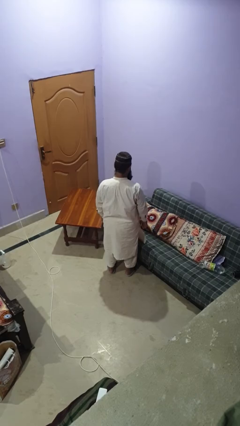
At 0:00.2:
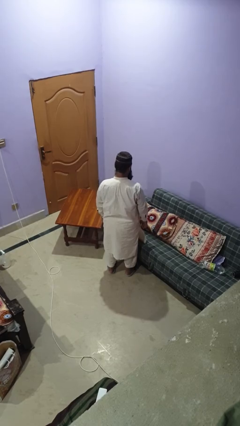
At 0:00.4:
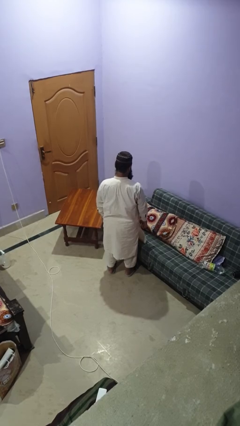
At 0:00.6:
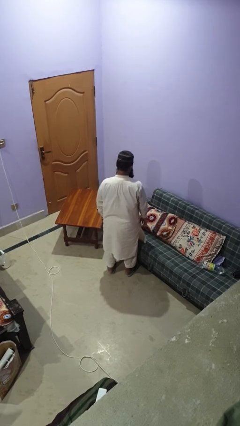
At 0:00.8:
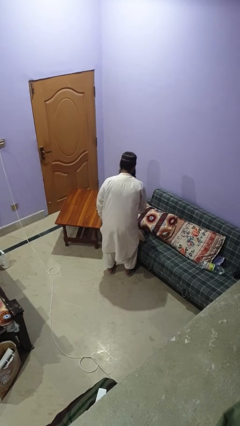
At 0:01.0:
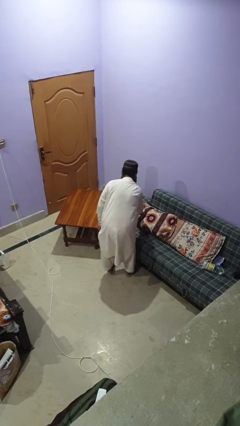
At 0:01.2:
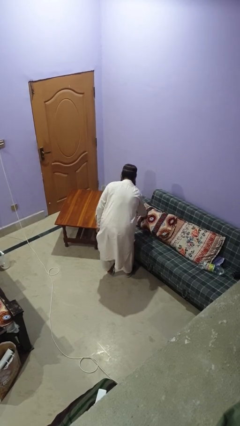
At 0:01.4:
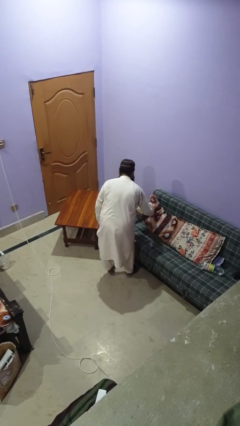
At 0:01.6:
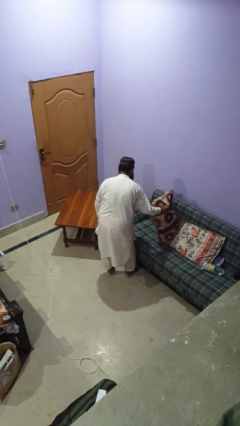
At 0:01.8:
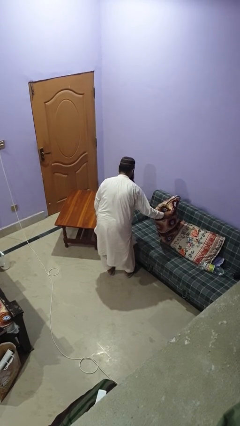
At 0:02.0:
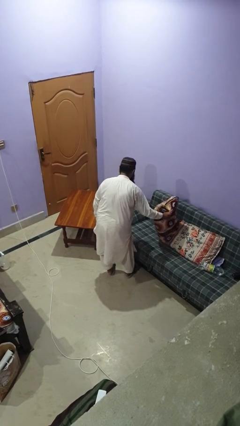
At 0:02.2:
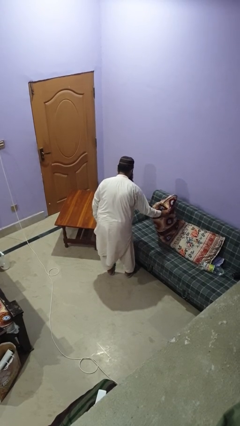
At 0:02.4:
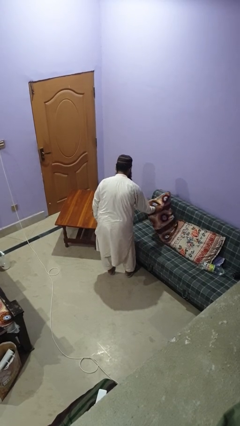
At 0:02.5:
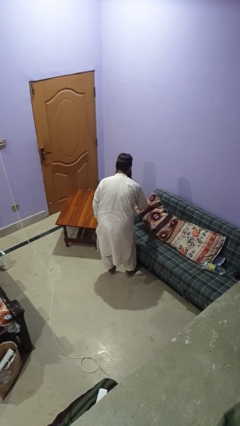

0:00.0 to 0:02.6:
person searches in couch

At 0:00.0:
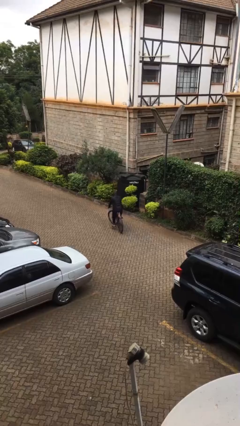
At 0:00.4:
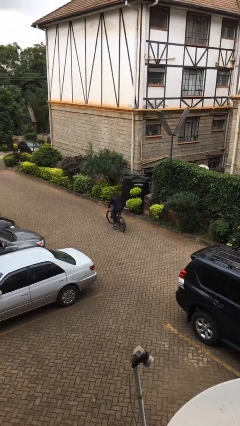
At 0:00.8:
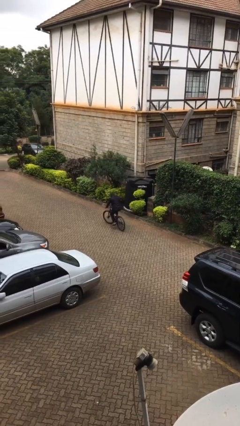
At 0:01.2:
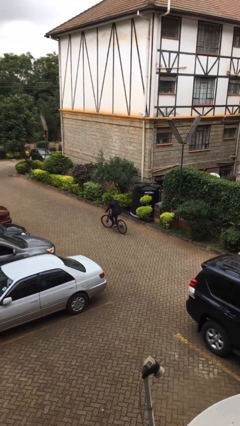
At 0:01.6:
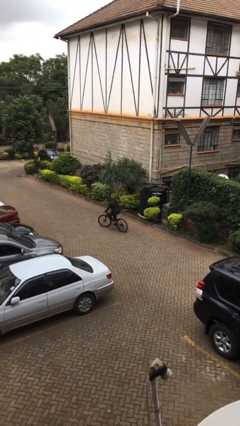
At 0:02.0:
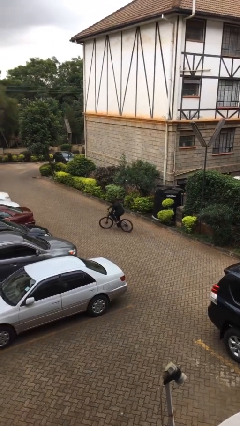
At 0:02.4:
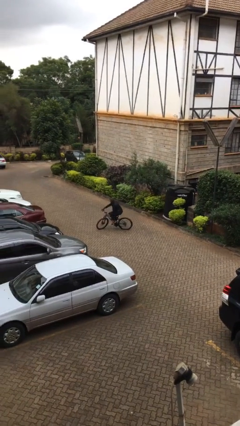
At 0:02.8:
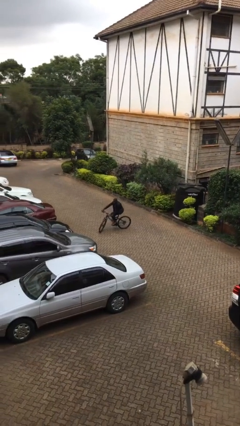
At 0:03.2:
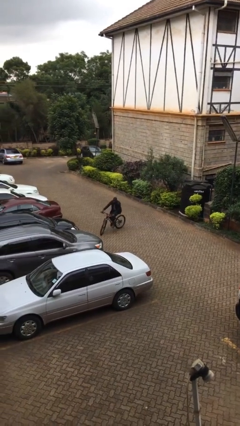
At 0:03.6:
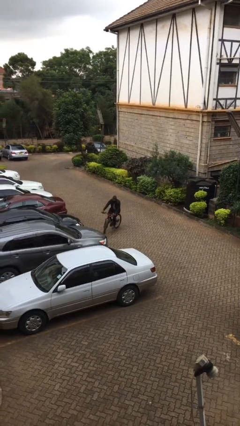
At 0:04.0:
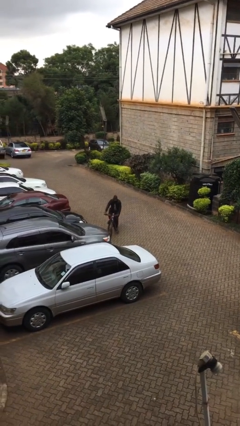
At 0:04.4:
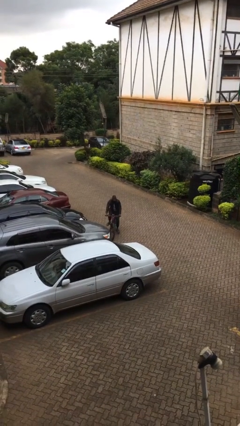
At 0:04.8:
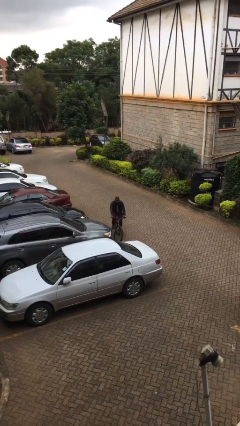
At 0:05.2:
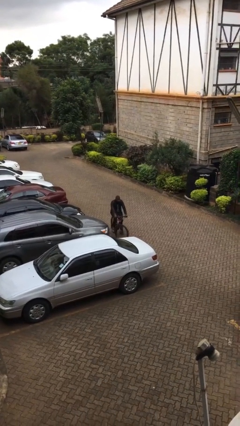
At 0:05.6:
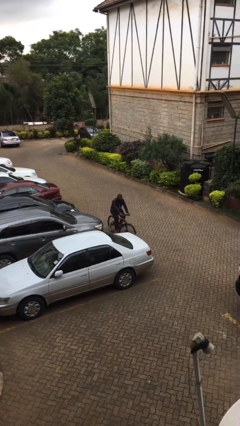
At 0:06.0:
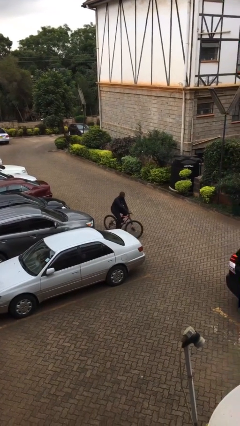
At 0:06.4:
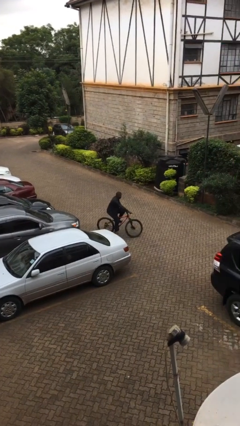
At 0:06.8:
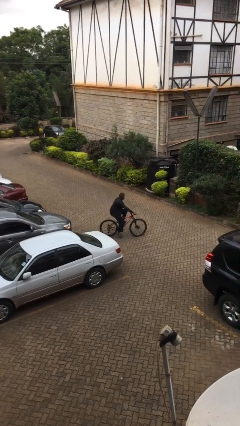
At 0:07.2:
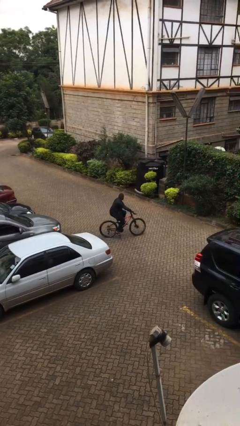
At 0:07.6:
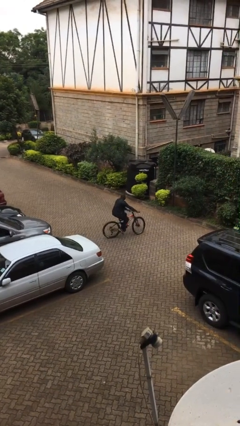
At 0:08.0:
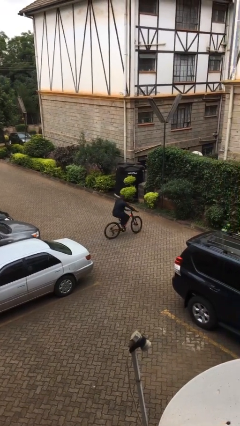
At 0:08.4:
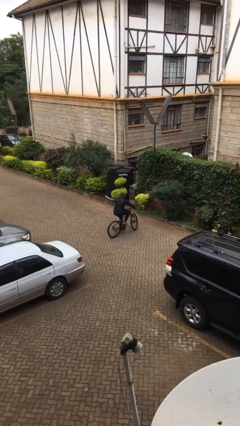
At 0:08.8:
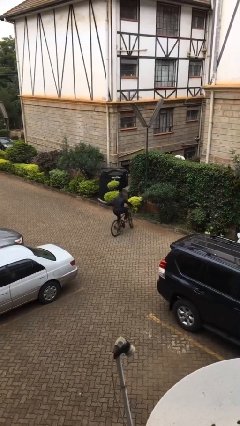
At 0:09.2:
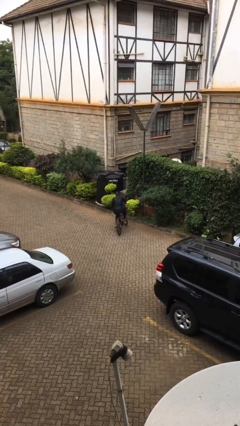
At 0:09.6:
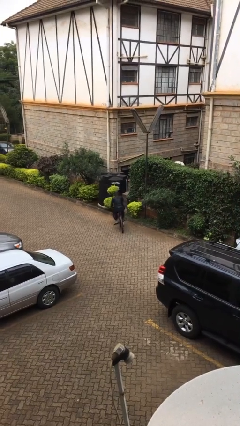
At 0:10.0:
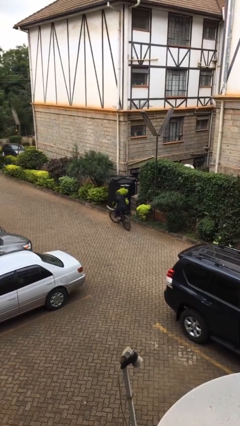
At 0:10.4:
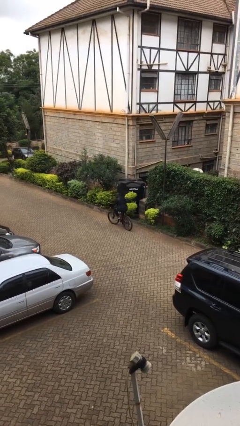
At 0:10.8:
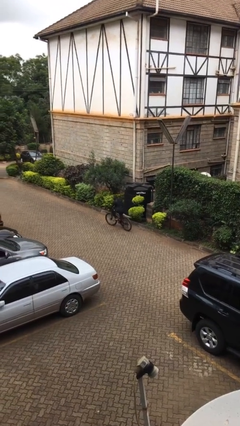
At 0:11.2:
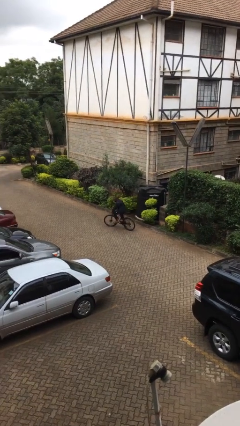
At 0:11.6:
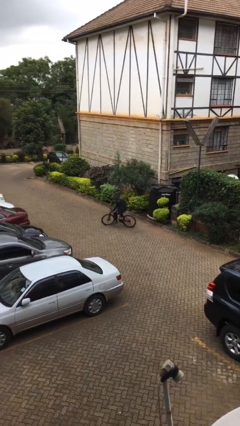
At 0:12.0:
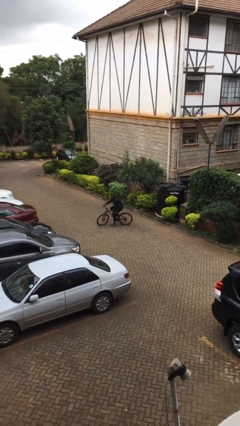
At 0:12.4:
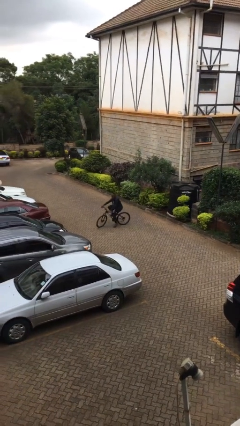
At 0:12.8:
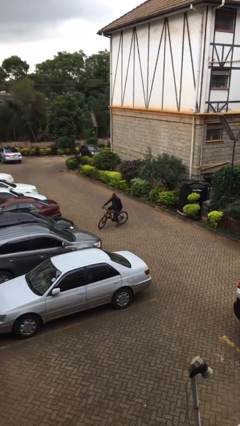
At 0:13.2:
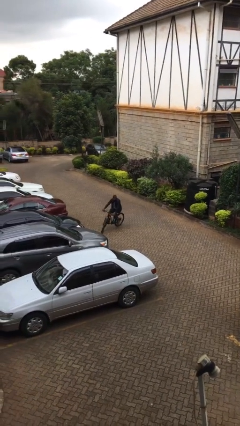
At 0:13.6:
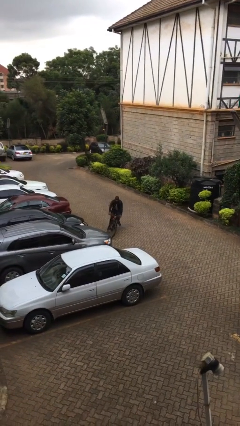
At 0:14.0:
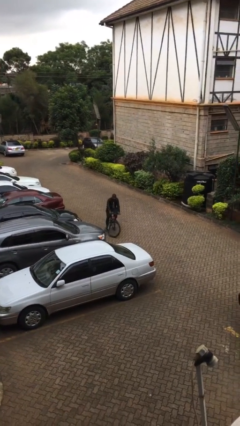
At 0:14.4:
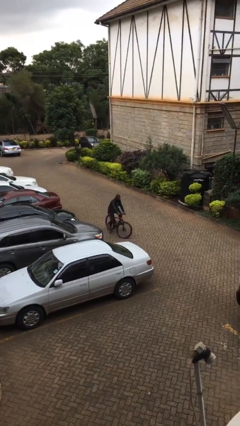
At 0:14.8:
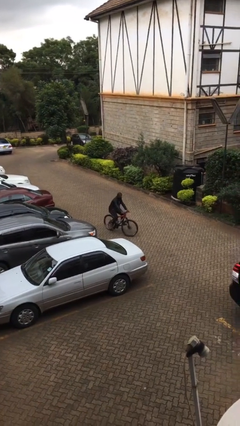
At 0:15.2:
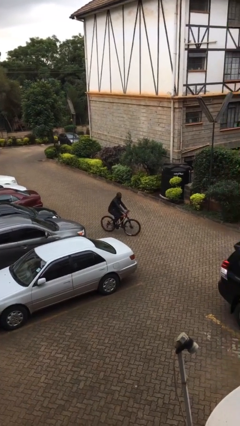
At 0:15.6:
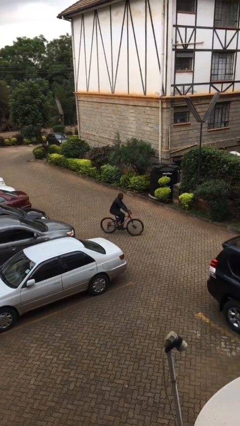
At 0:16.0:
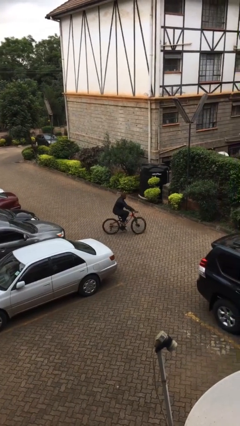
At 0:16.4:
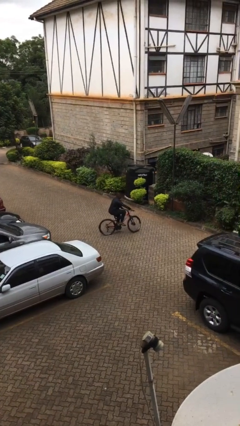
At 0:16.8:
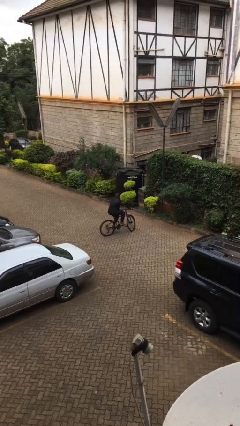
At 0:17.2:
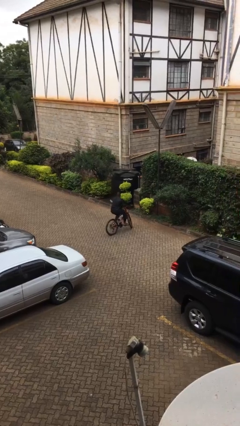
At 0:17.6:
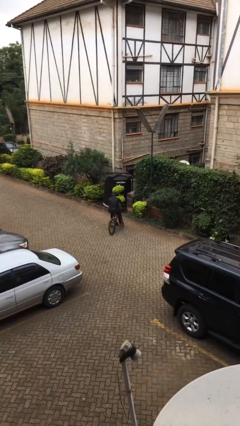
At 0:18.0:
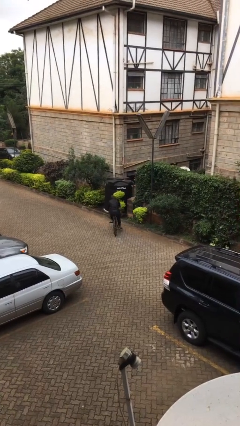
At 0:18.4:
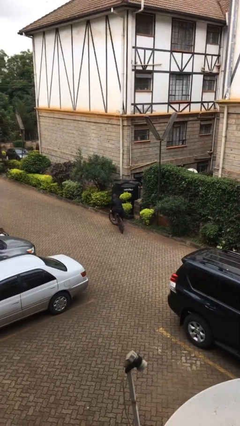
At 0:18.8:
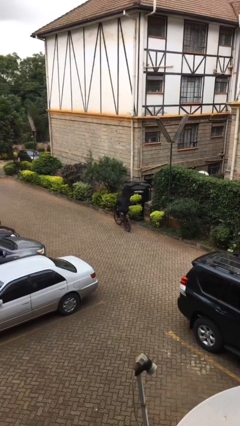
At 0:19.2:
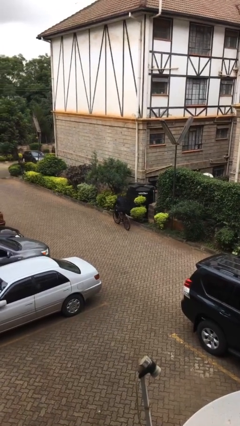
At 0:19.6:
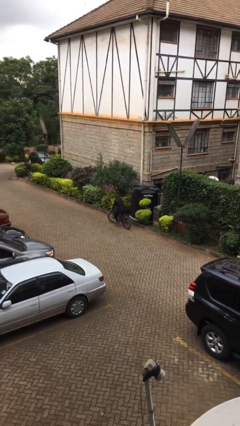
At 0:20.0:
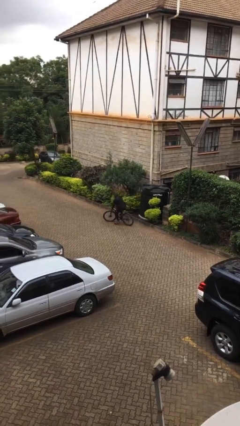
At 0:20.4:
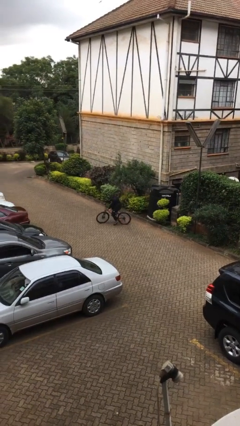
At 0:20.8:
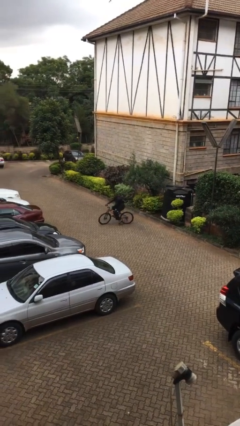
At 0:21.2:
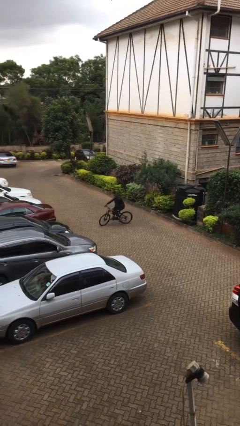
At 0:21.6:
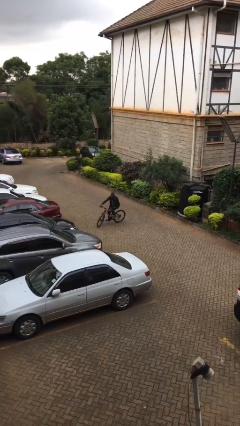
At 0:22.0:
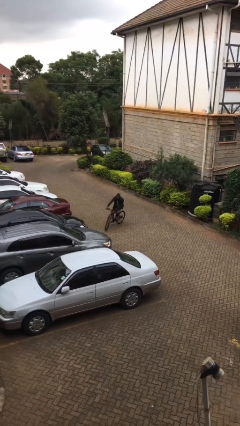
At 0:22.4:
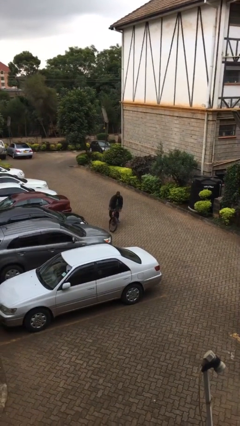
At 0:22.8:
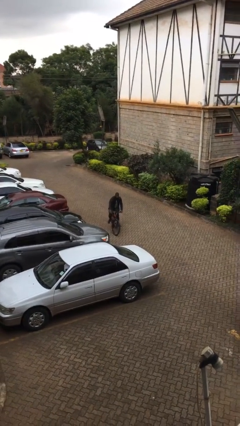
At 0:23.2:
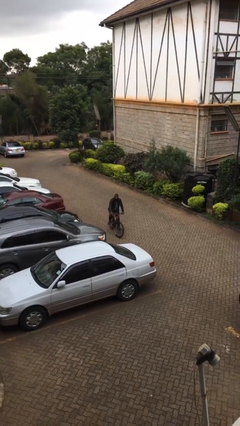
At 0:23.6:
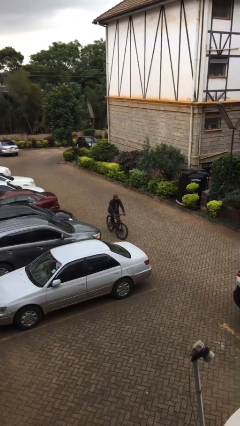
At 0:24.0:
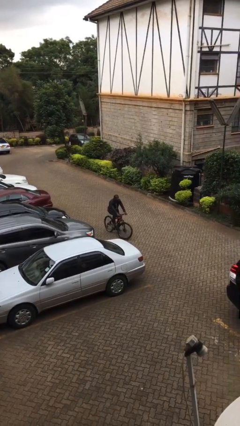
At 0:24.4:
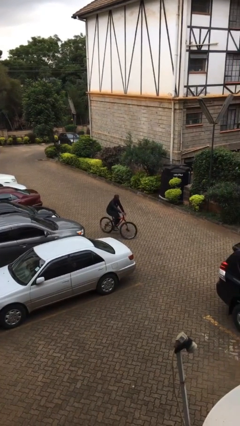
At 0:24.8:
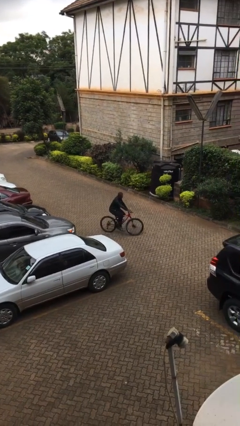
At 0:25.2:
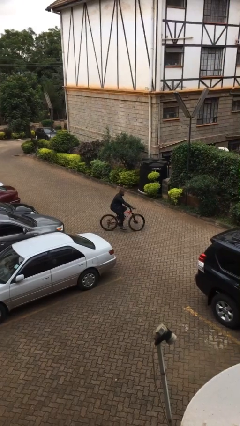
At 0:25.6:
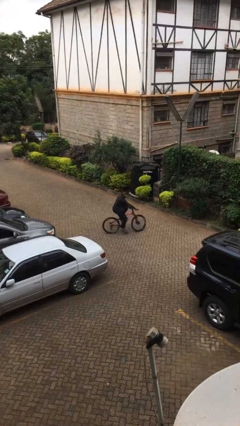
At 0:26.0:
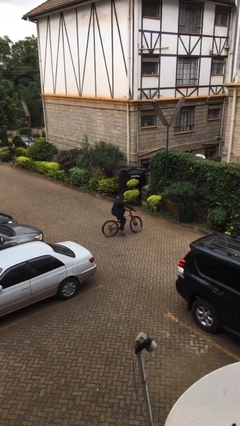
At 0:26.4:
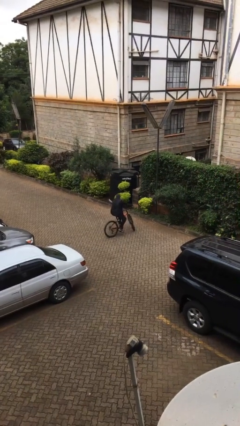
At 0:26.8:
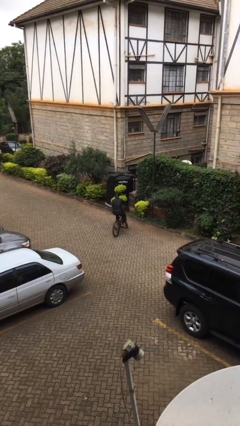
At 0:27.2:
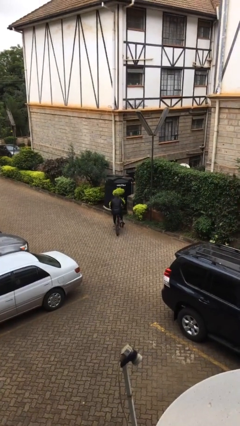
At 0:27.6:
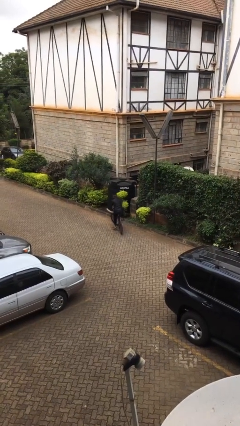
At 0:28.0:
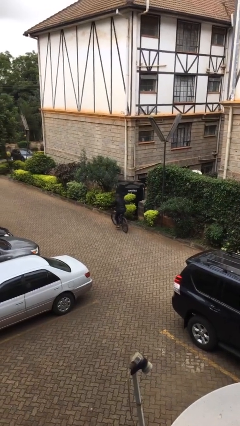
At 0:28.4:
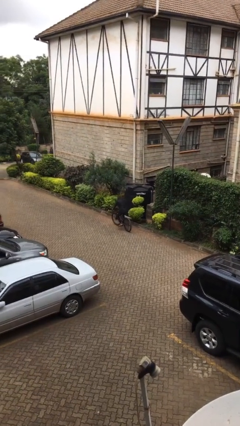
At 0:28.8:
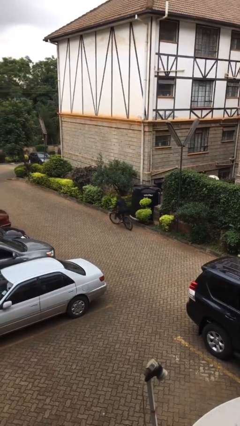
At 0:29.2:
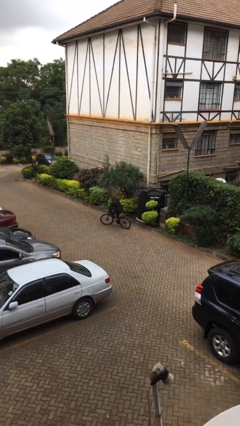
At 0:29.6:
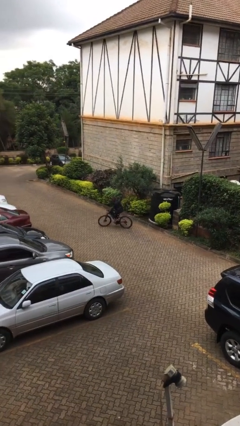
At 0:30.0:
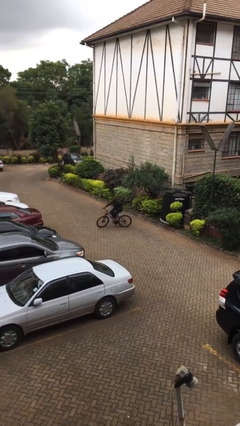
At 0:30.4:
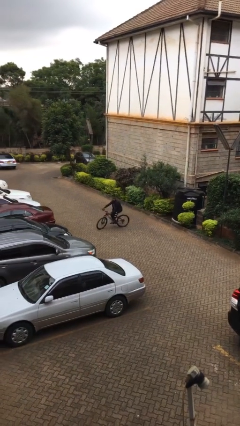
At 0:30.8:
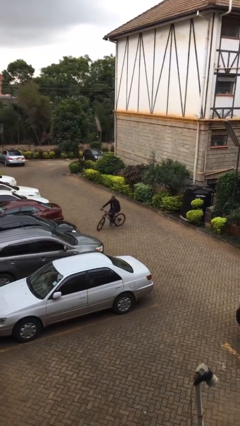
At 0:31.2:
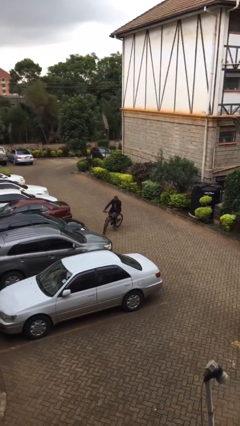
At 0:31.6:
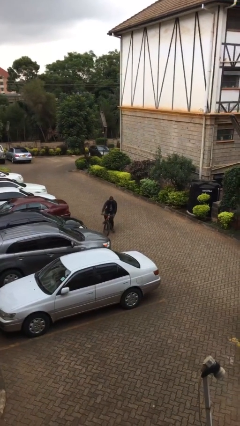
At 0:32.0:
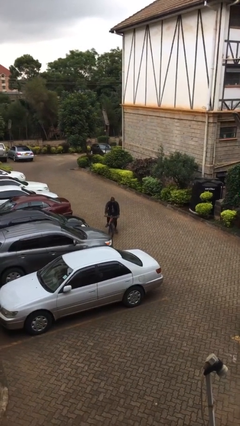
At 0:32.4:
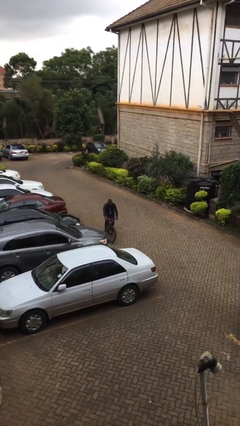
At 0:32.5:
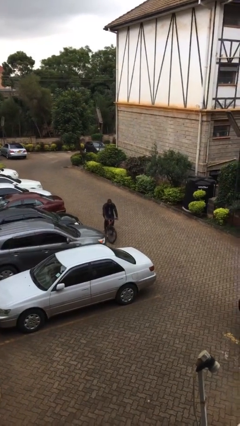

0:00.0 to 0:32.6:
person rides bicycle
